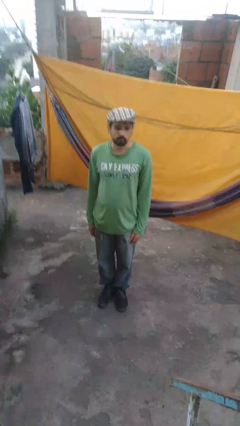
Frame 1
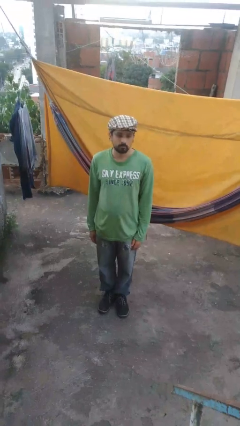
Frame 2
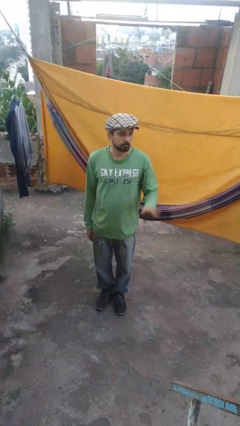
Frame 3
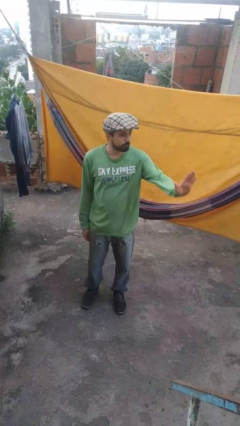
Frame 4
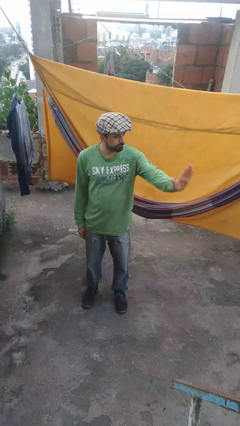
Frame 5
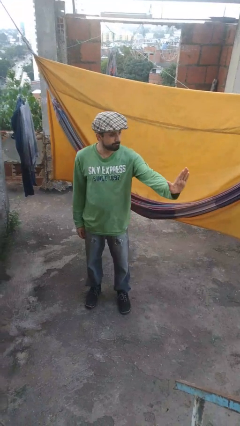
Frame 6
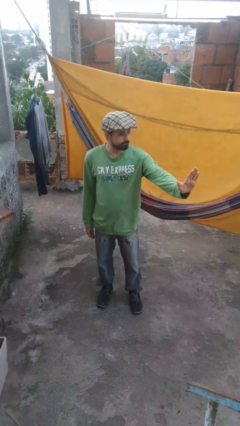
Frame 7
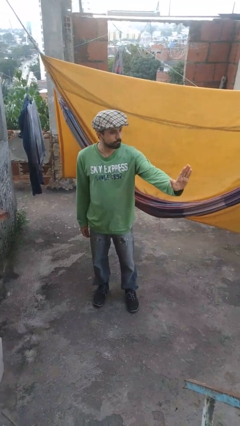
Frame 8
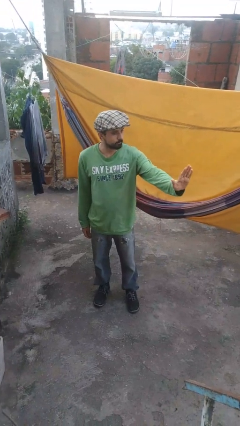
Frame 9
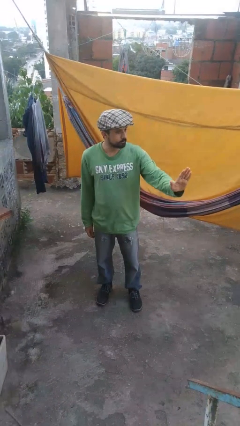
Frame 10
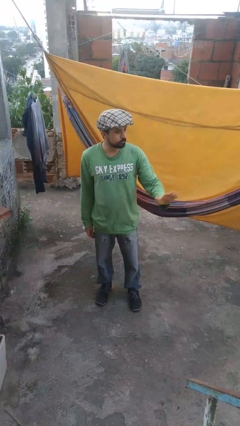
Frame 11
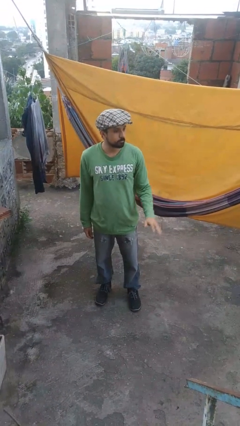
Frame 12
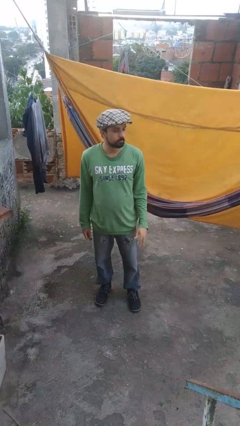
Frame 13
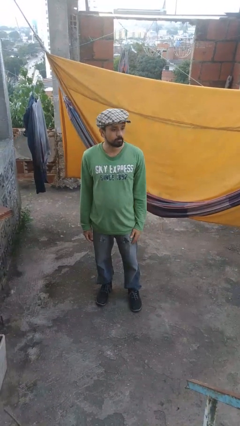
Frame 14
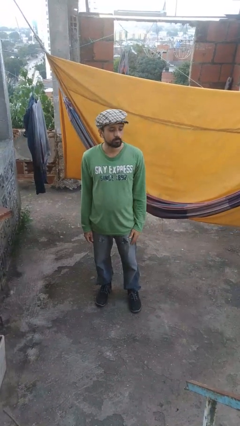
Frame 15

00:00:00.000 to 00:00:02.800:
person gestures stop

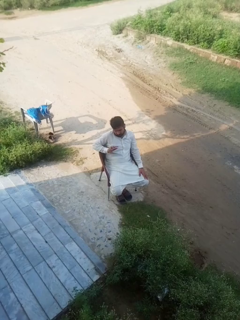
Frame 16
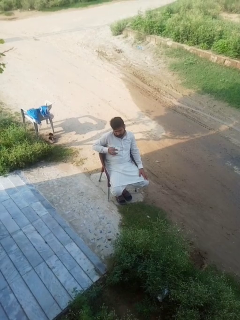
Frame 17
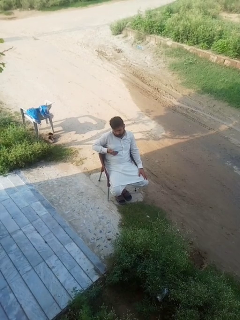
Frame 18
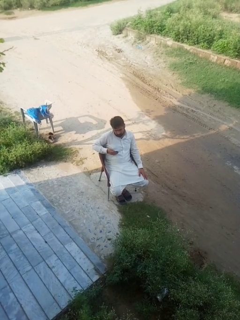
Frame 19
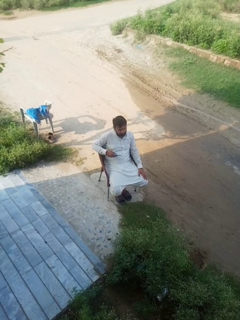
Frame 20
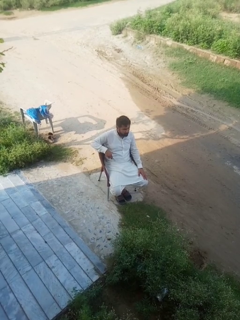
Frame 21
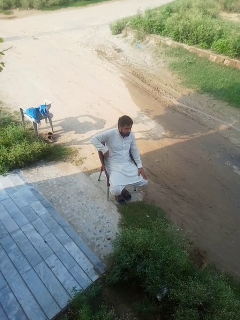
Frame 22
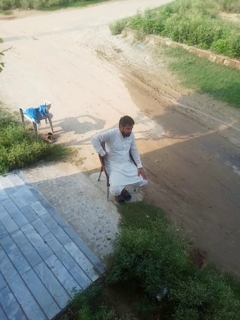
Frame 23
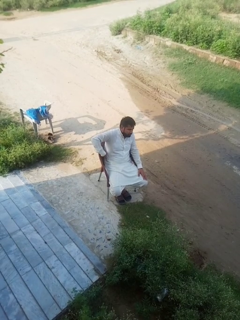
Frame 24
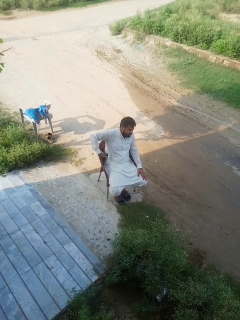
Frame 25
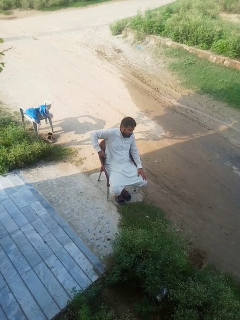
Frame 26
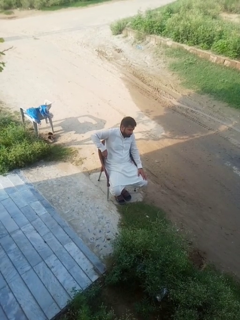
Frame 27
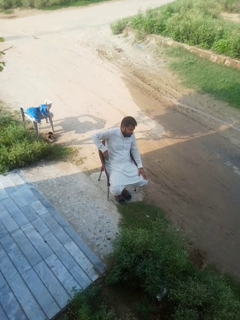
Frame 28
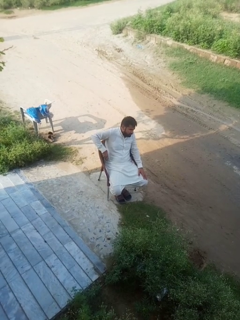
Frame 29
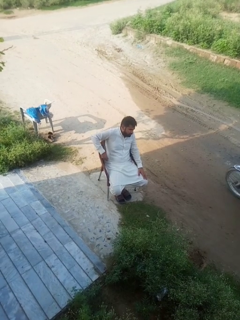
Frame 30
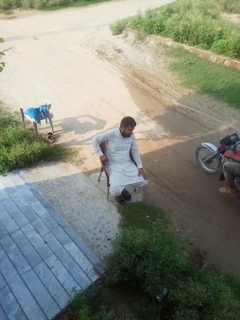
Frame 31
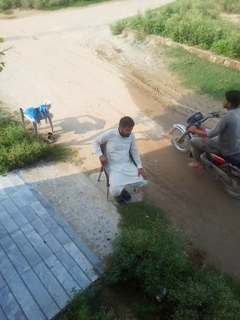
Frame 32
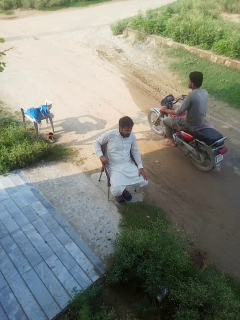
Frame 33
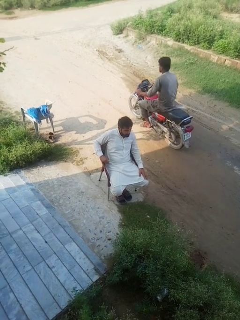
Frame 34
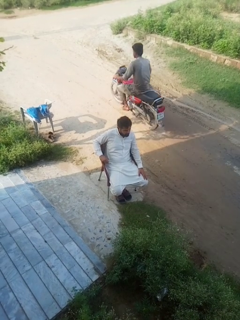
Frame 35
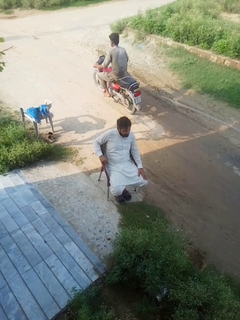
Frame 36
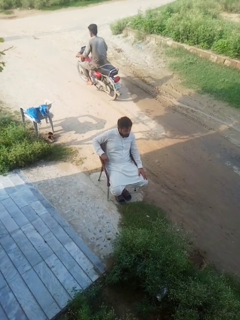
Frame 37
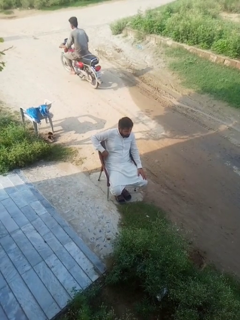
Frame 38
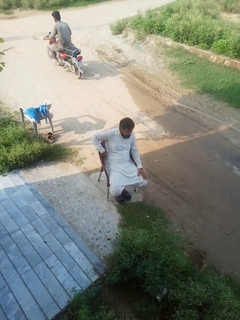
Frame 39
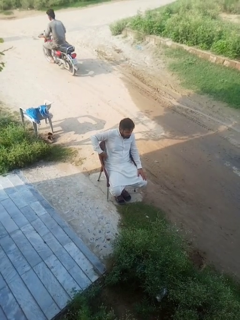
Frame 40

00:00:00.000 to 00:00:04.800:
person puts phone into pocket

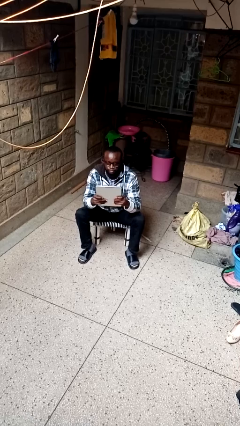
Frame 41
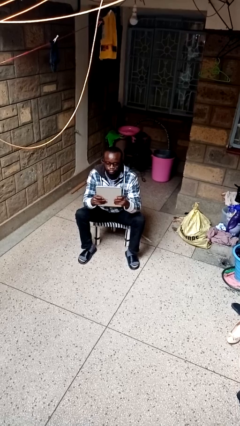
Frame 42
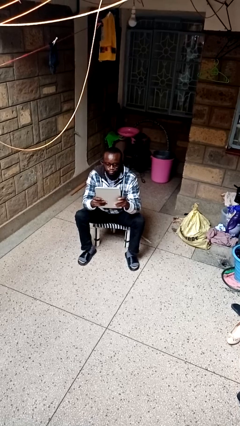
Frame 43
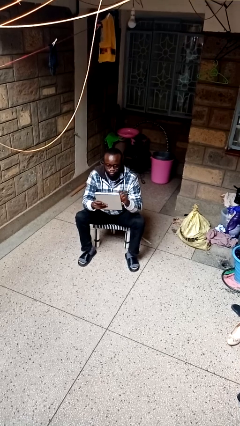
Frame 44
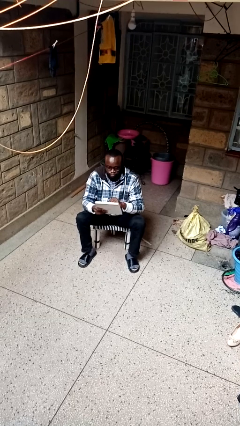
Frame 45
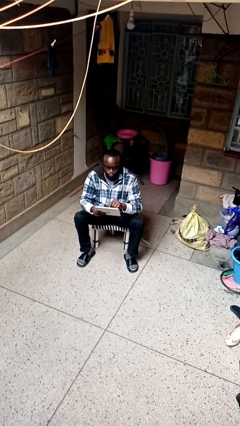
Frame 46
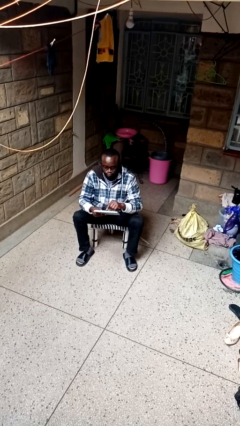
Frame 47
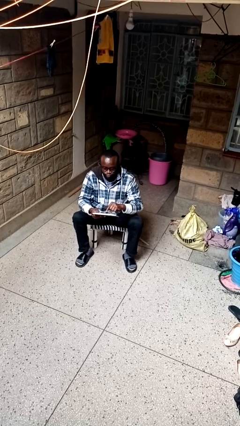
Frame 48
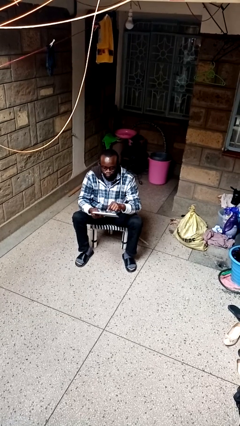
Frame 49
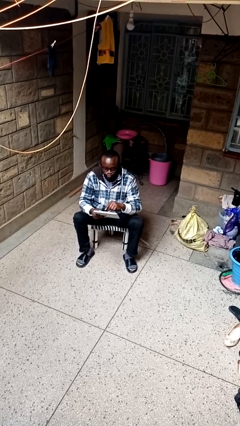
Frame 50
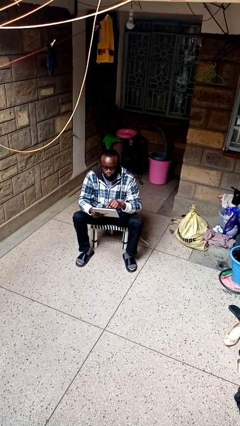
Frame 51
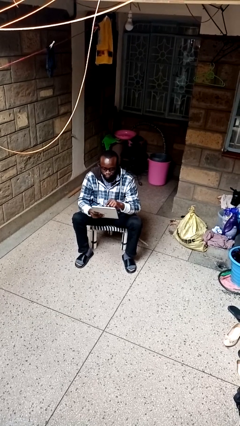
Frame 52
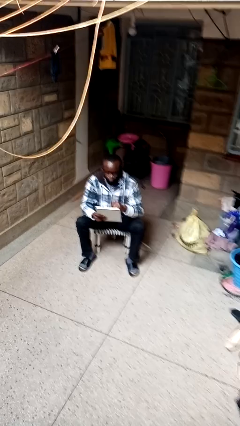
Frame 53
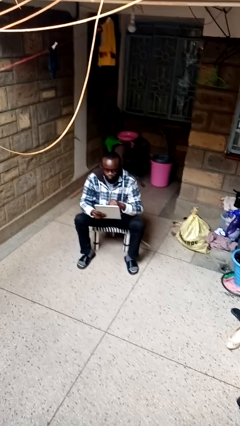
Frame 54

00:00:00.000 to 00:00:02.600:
person interacts with tablet

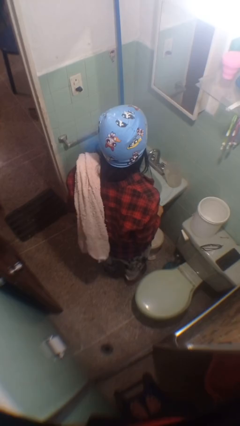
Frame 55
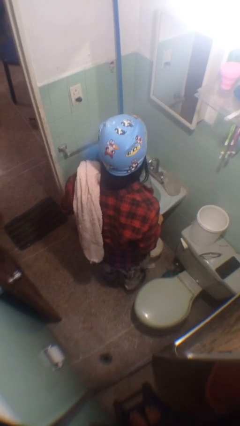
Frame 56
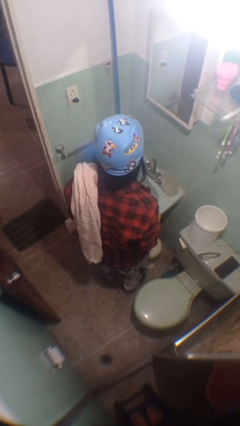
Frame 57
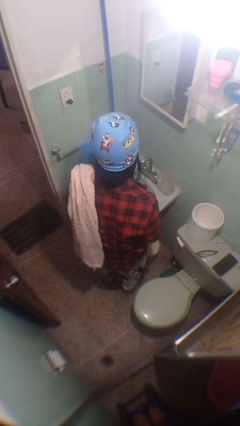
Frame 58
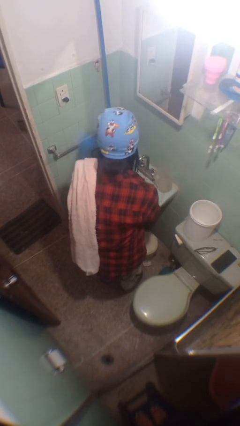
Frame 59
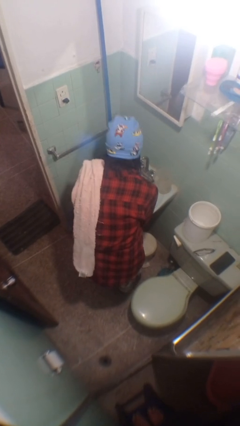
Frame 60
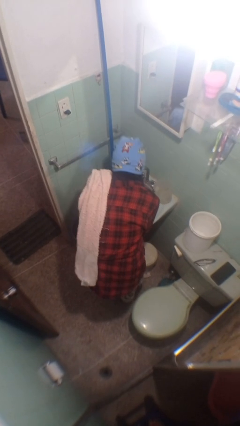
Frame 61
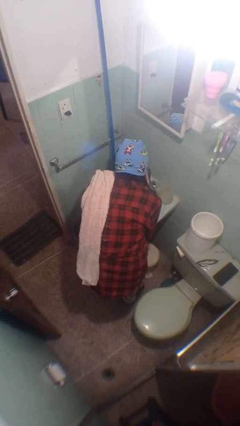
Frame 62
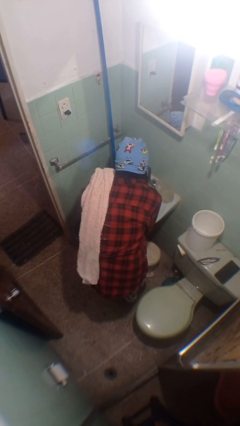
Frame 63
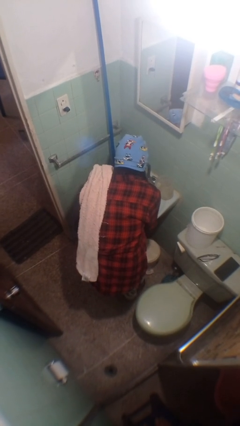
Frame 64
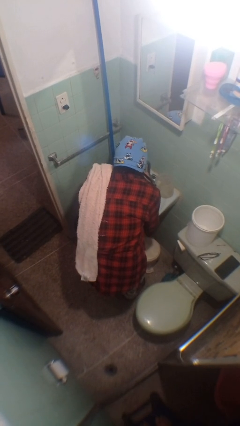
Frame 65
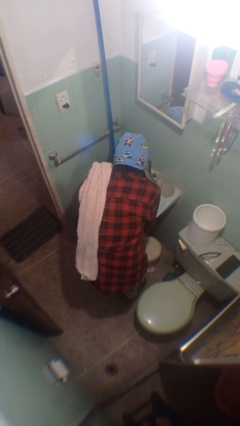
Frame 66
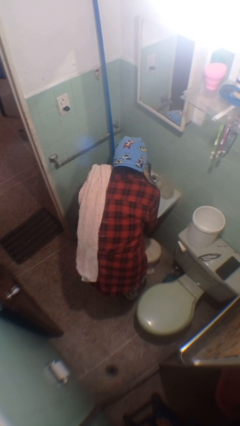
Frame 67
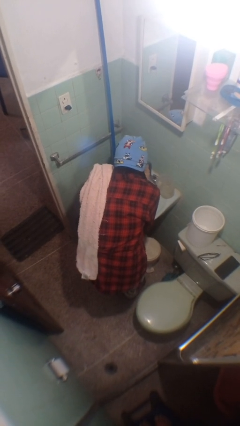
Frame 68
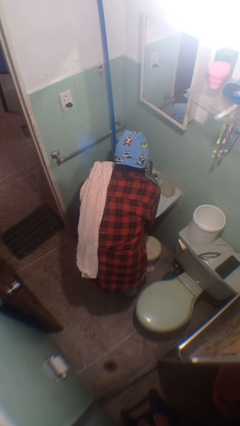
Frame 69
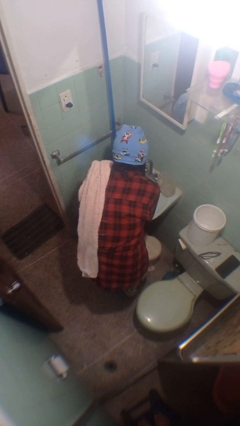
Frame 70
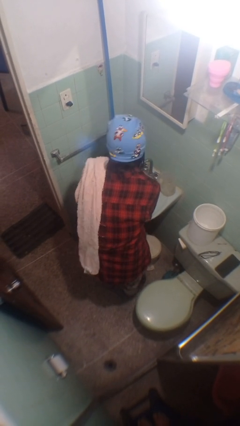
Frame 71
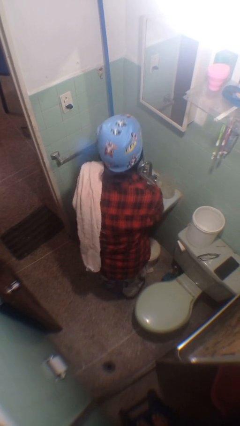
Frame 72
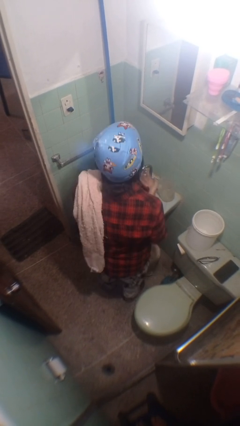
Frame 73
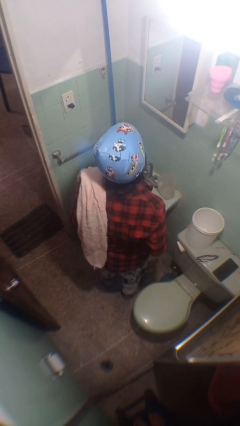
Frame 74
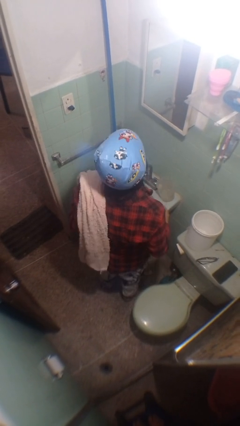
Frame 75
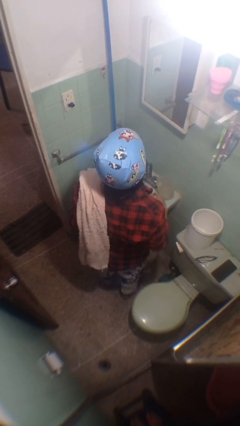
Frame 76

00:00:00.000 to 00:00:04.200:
person washes face

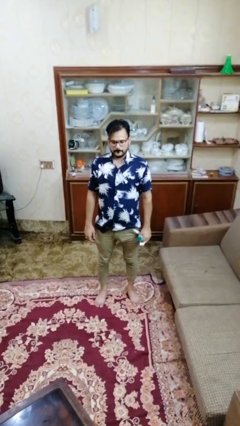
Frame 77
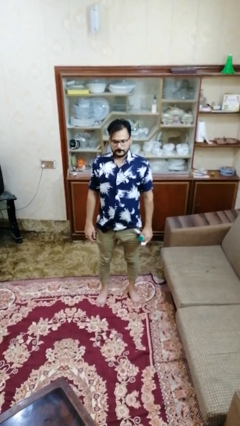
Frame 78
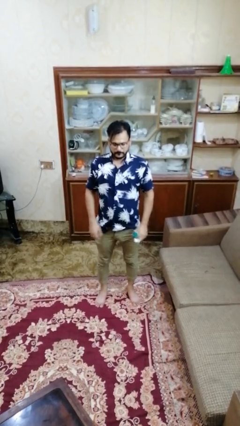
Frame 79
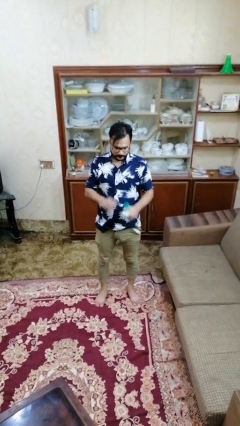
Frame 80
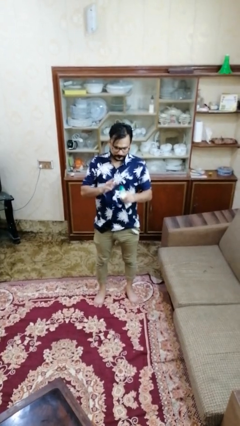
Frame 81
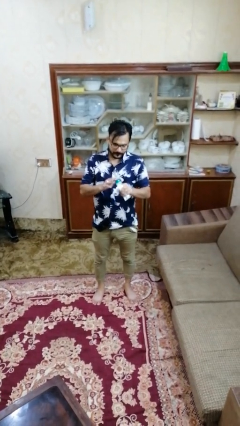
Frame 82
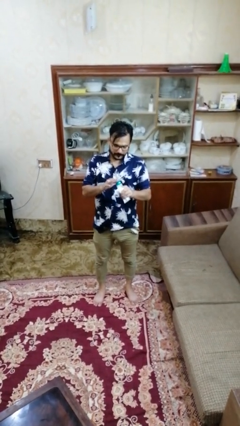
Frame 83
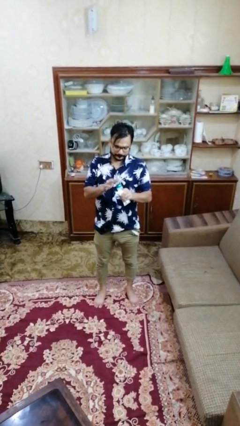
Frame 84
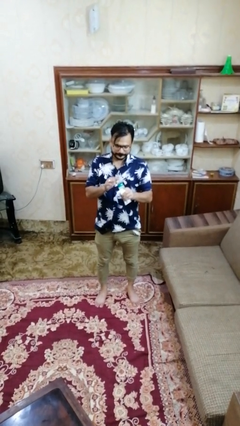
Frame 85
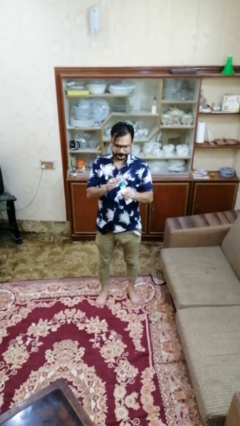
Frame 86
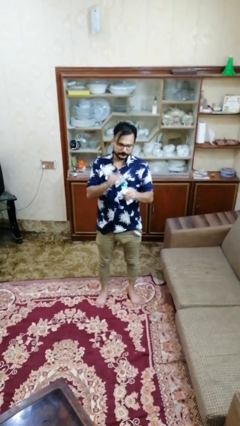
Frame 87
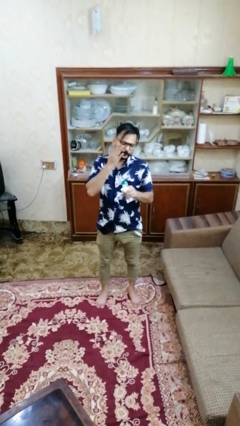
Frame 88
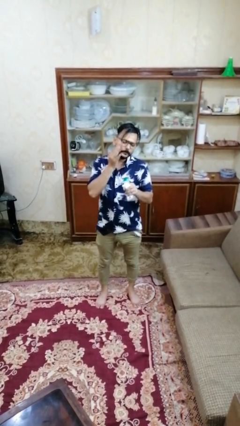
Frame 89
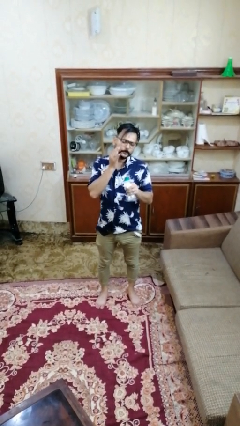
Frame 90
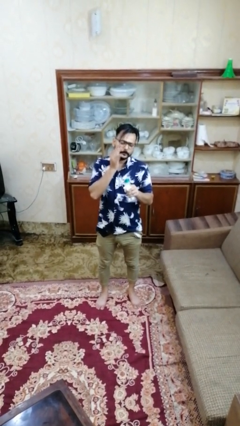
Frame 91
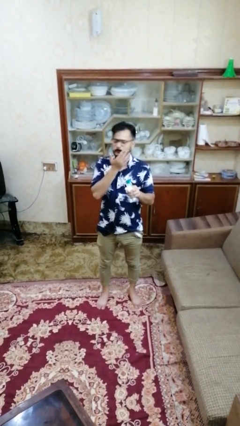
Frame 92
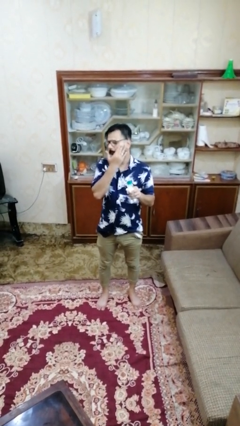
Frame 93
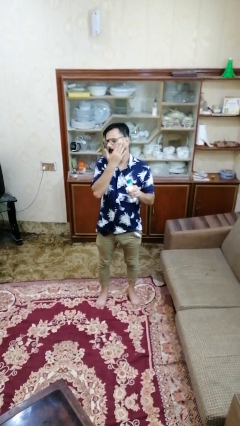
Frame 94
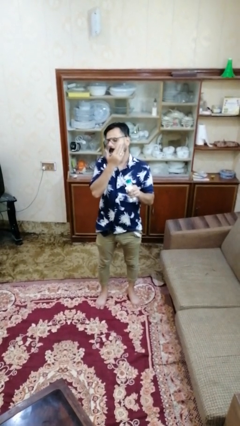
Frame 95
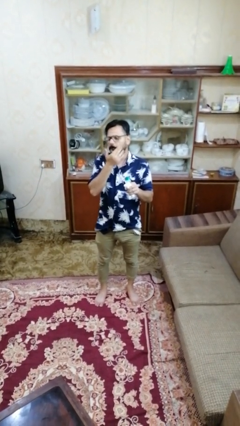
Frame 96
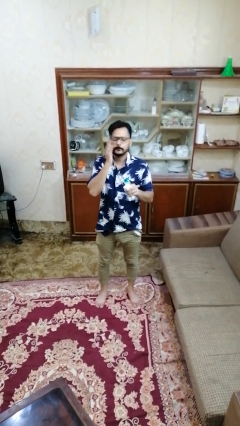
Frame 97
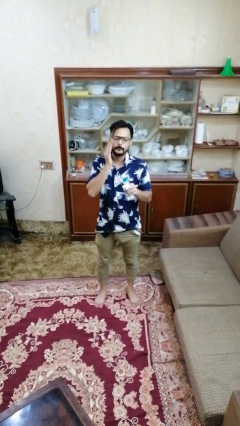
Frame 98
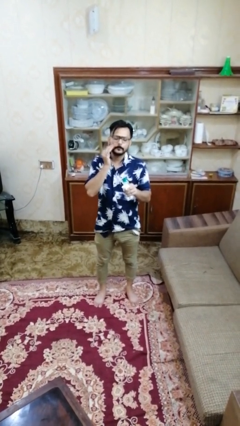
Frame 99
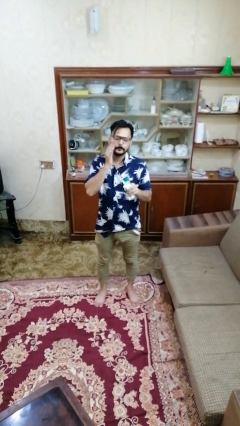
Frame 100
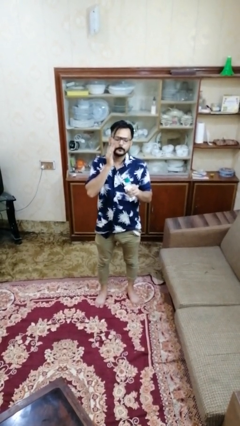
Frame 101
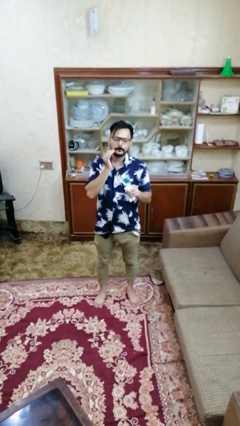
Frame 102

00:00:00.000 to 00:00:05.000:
person puts on facemask
